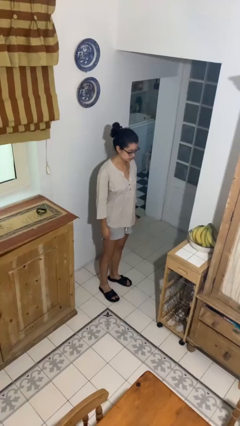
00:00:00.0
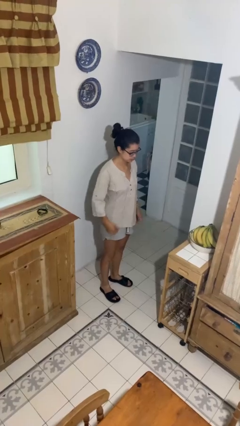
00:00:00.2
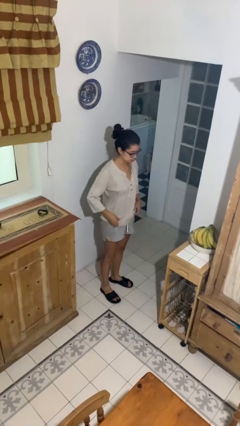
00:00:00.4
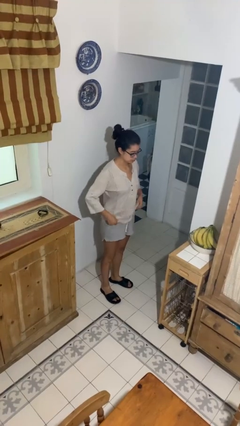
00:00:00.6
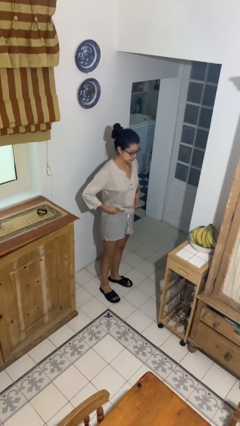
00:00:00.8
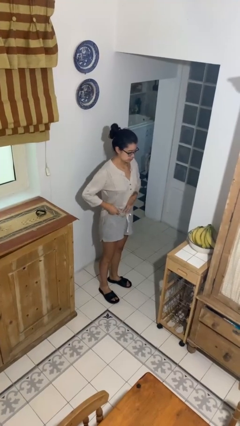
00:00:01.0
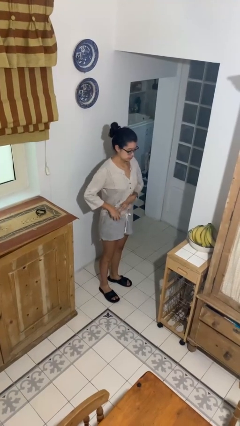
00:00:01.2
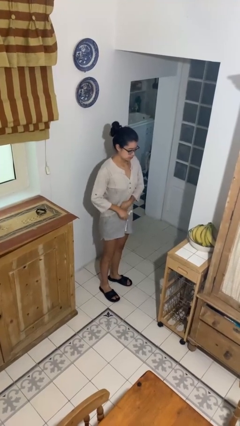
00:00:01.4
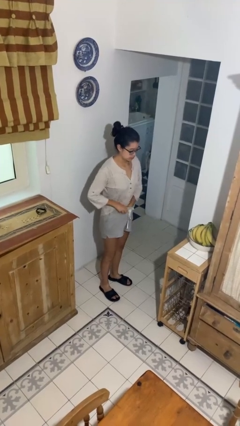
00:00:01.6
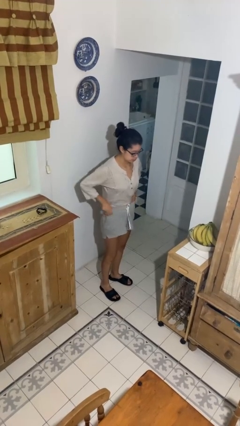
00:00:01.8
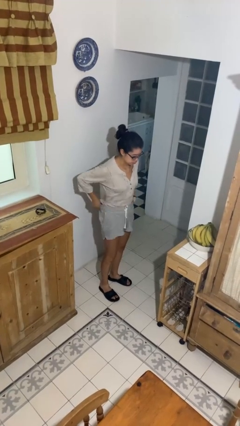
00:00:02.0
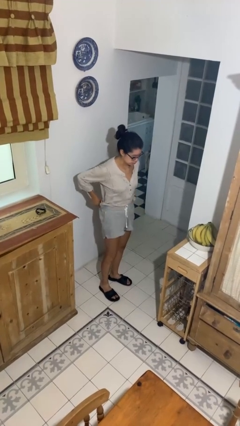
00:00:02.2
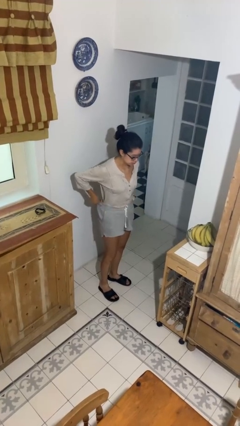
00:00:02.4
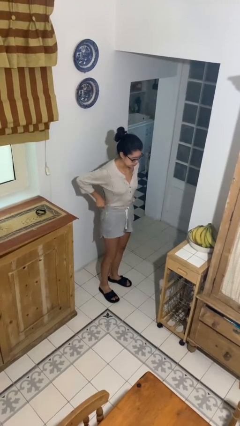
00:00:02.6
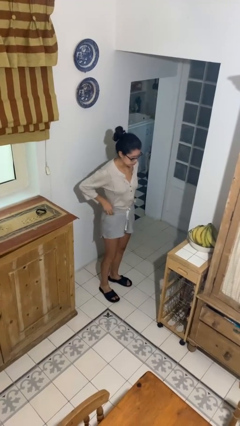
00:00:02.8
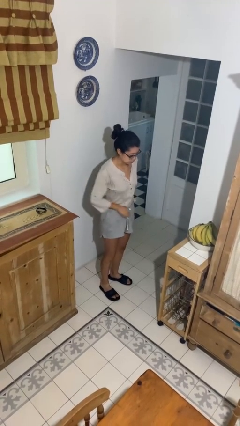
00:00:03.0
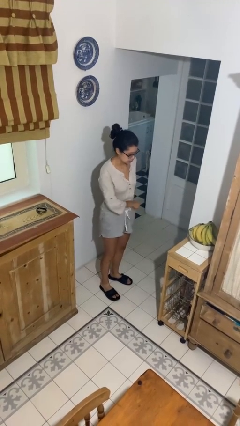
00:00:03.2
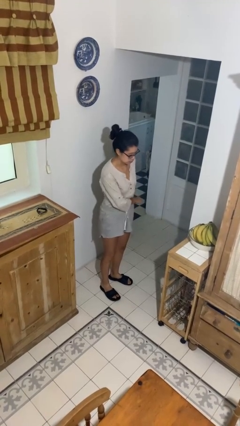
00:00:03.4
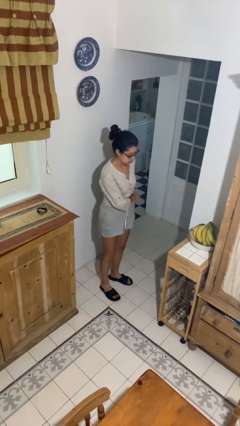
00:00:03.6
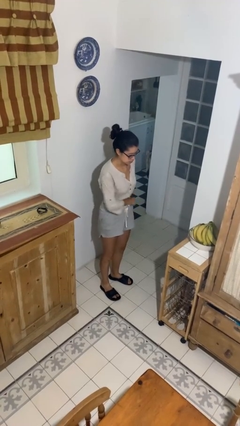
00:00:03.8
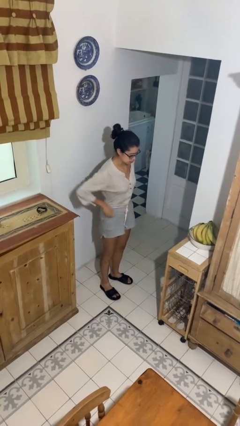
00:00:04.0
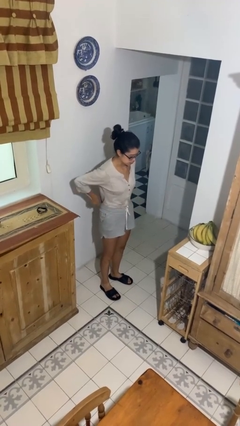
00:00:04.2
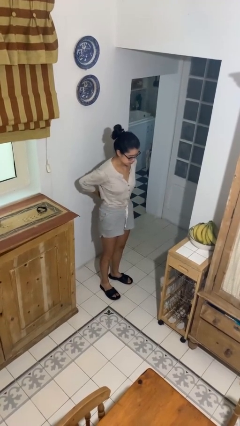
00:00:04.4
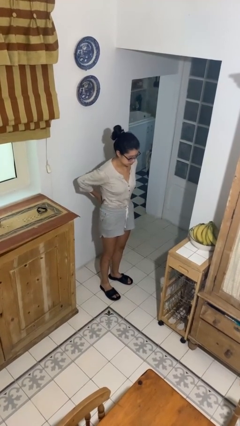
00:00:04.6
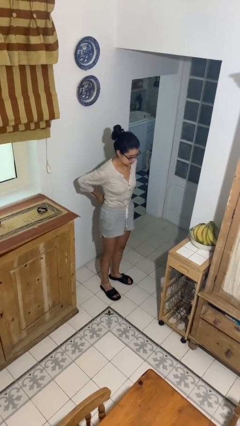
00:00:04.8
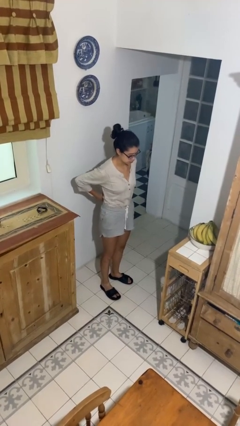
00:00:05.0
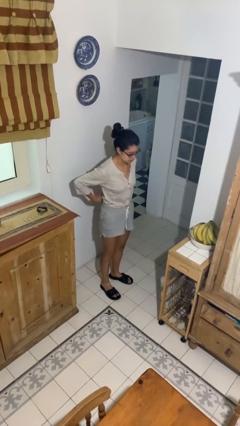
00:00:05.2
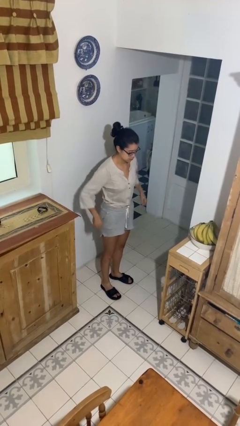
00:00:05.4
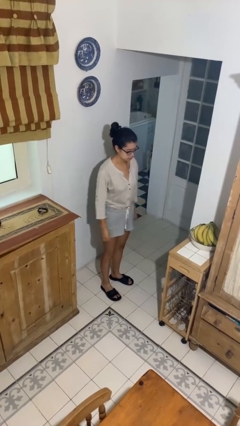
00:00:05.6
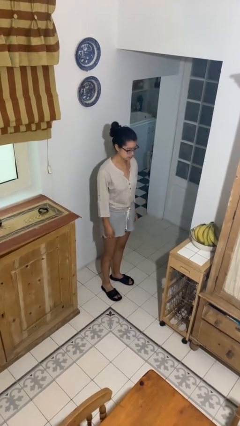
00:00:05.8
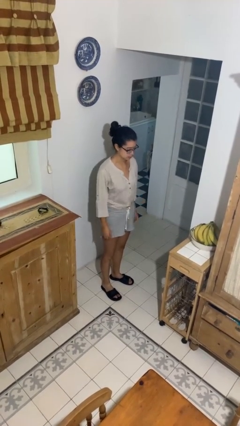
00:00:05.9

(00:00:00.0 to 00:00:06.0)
person tucks in shirt

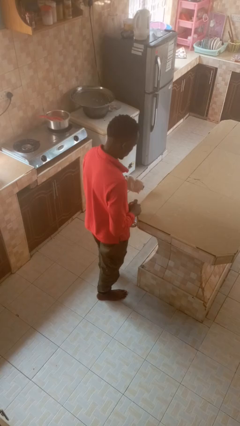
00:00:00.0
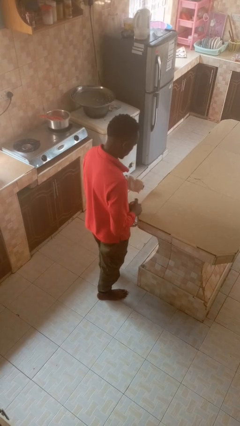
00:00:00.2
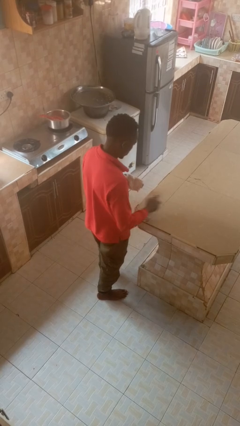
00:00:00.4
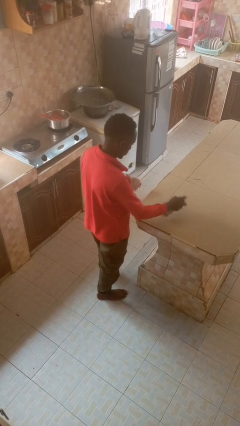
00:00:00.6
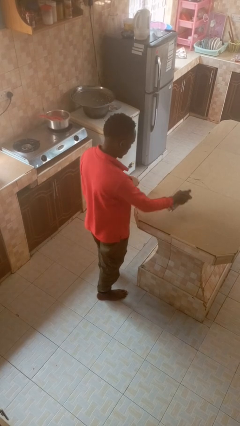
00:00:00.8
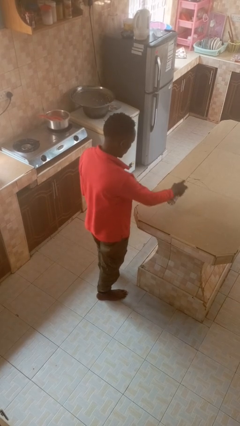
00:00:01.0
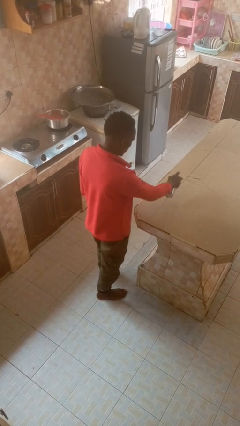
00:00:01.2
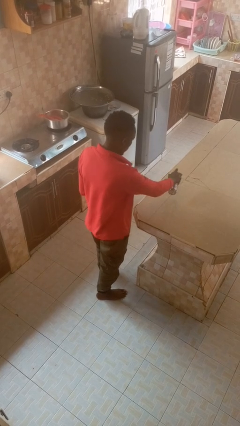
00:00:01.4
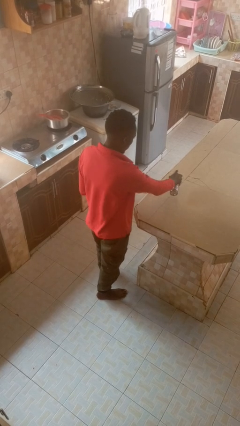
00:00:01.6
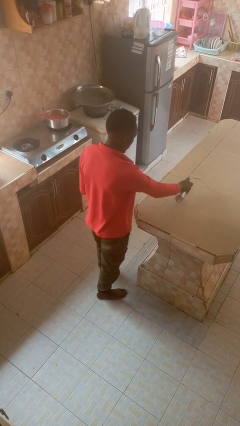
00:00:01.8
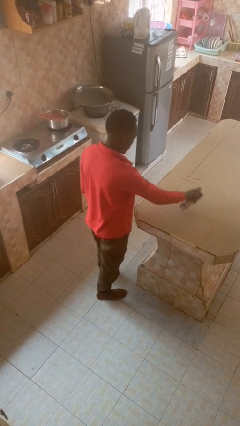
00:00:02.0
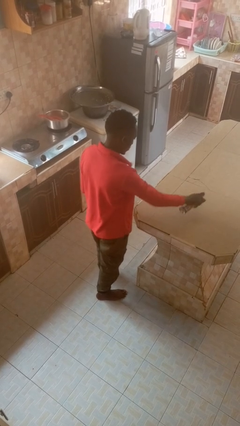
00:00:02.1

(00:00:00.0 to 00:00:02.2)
person sprays from bottle

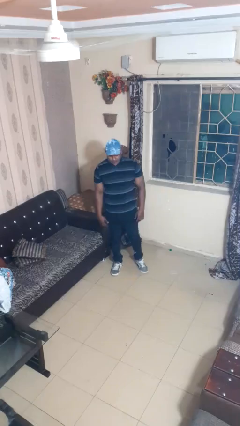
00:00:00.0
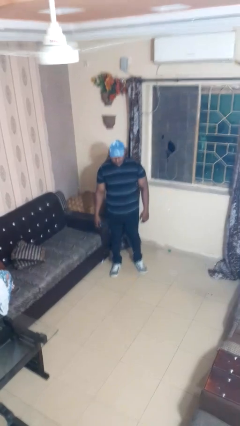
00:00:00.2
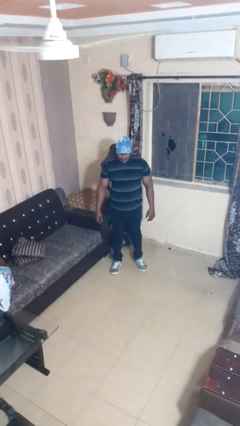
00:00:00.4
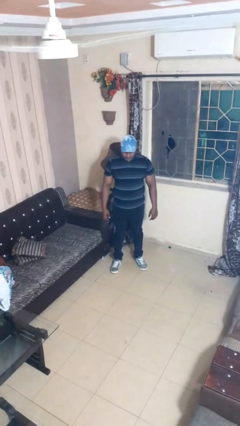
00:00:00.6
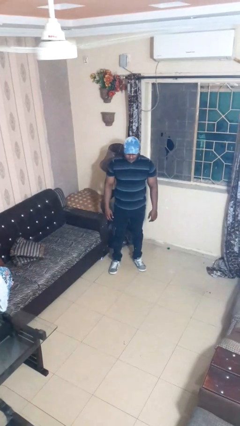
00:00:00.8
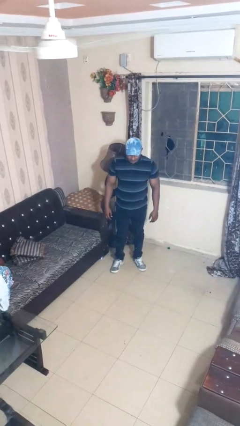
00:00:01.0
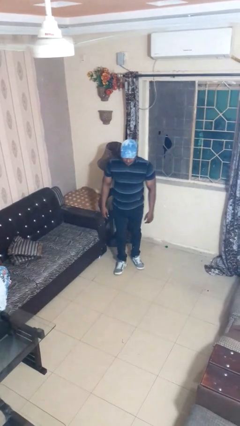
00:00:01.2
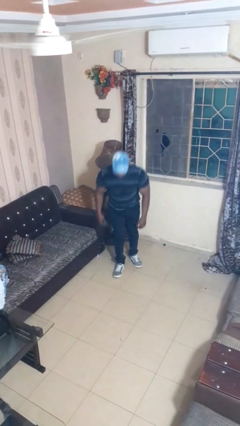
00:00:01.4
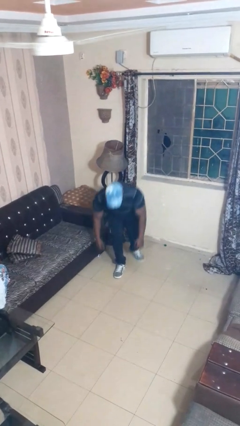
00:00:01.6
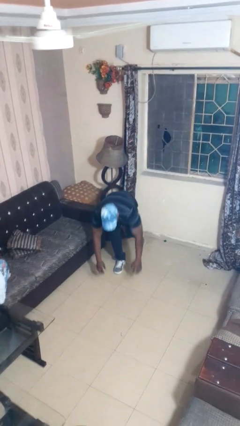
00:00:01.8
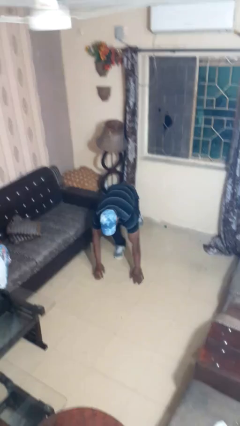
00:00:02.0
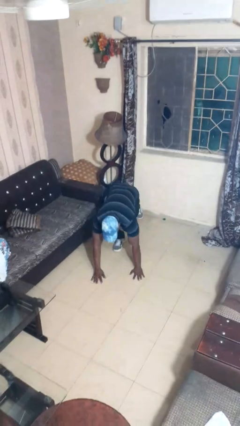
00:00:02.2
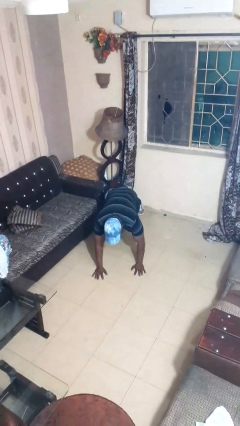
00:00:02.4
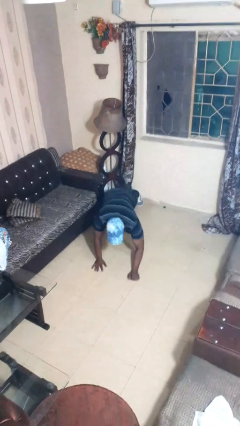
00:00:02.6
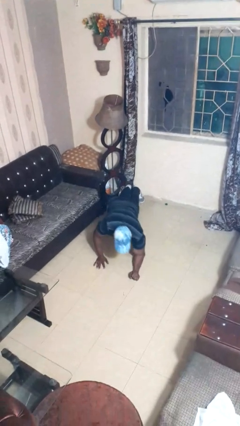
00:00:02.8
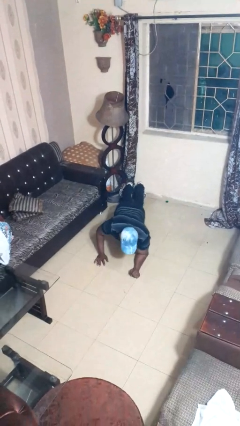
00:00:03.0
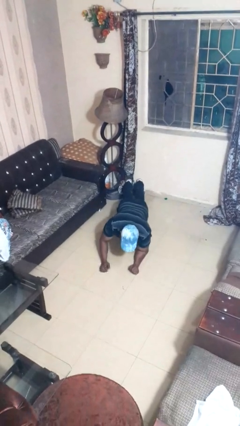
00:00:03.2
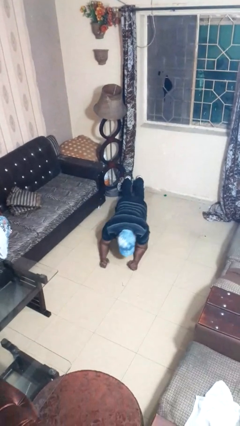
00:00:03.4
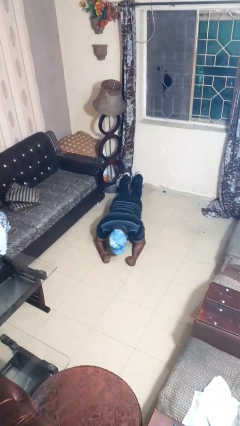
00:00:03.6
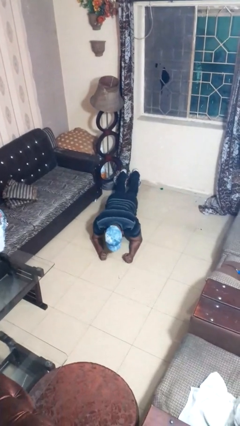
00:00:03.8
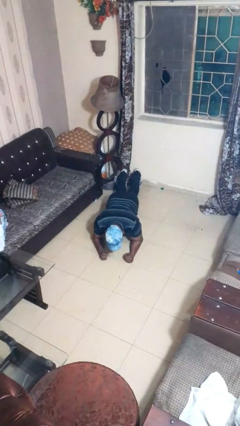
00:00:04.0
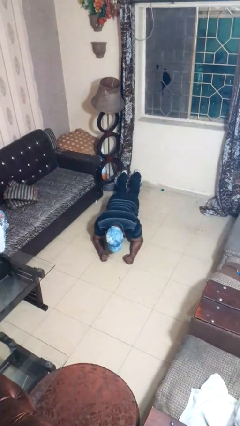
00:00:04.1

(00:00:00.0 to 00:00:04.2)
person exercises with plank

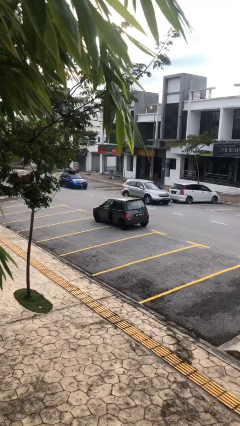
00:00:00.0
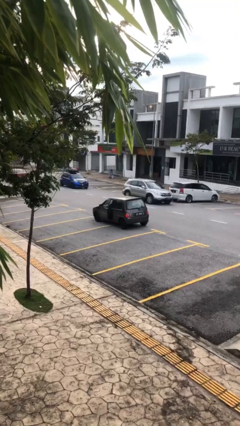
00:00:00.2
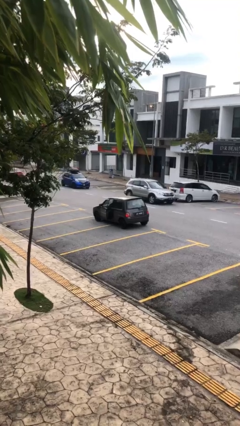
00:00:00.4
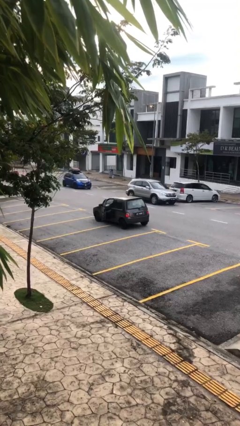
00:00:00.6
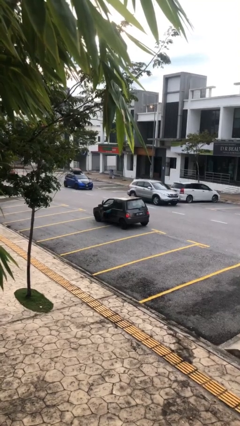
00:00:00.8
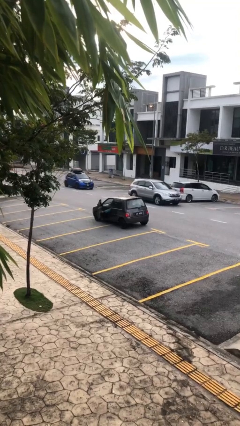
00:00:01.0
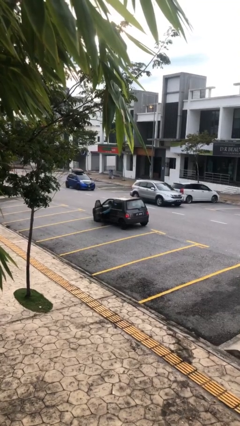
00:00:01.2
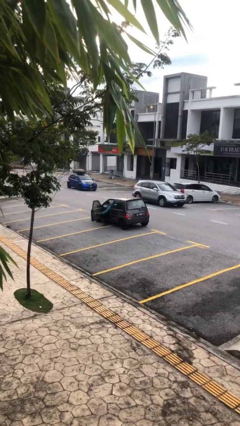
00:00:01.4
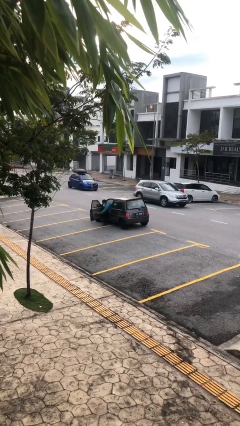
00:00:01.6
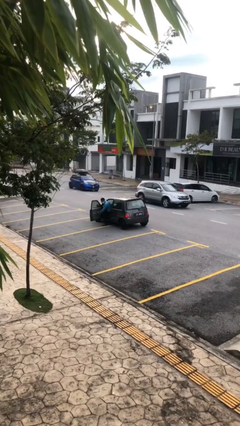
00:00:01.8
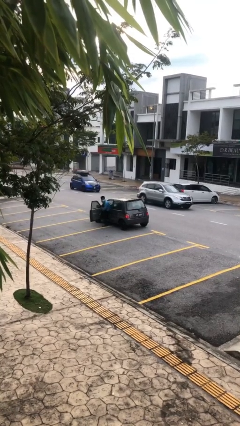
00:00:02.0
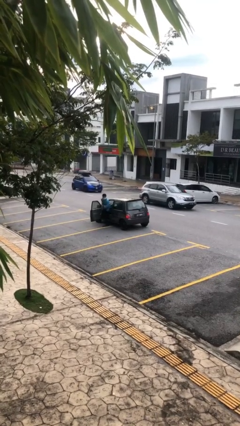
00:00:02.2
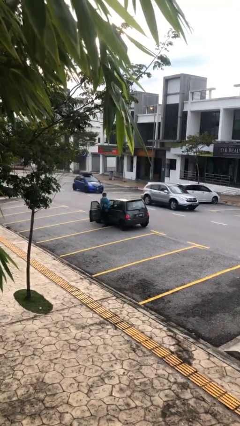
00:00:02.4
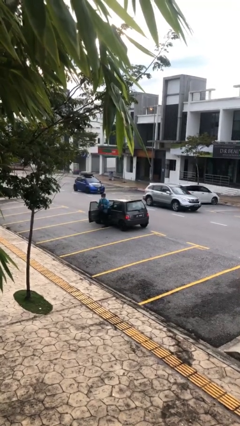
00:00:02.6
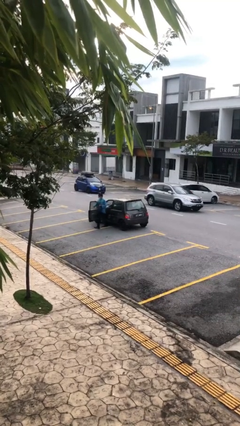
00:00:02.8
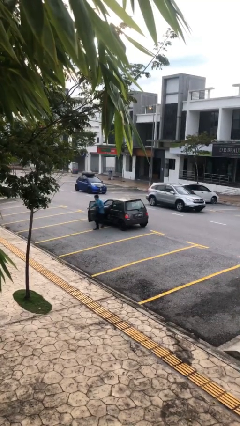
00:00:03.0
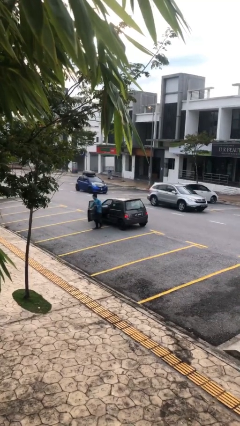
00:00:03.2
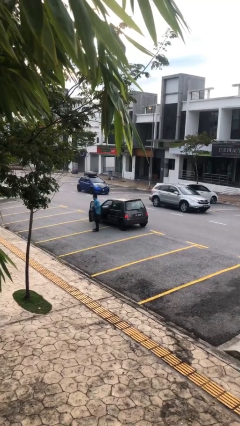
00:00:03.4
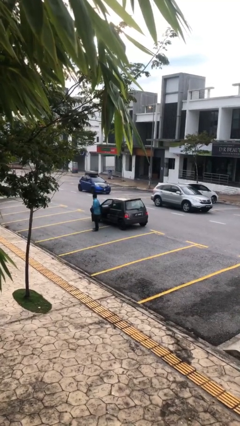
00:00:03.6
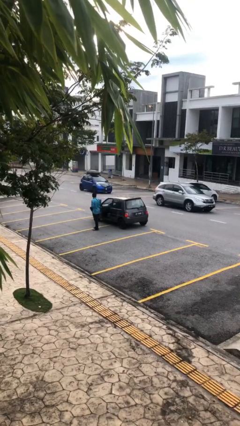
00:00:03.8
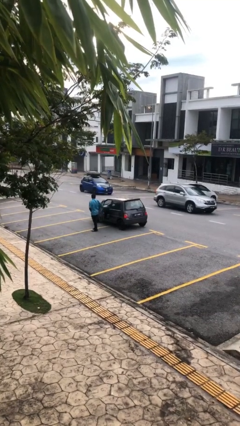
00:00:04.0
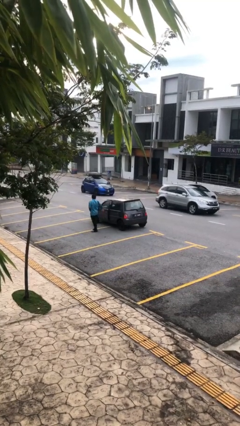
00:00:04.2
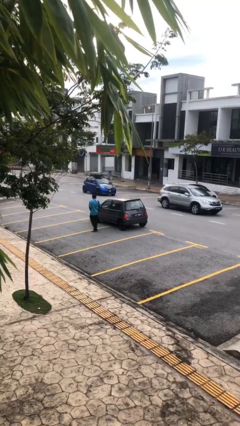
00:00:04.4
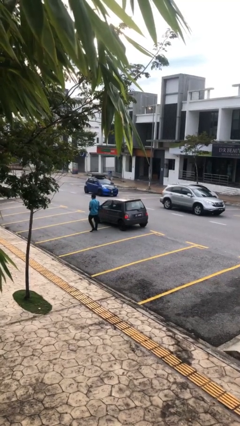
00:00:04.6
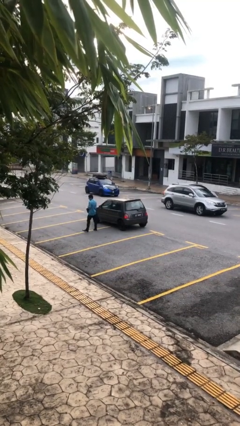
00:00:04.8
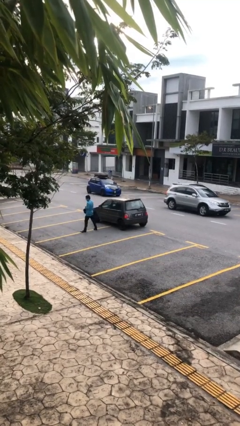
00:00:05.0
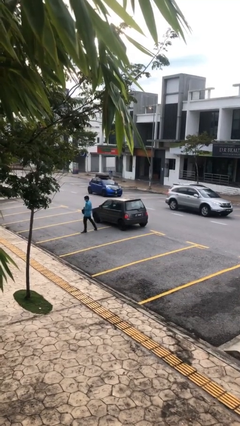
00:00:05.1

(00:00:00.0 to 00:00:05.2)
car drops off person

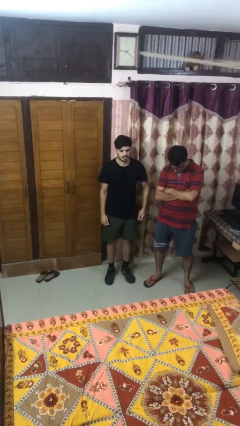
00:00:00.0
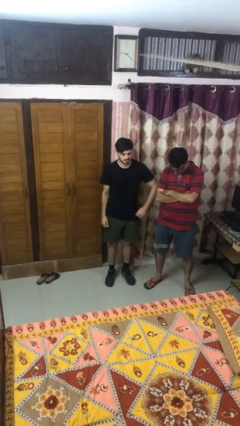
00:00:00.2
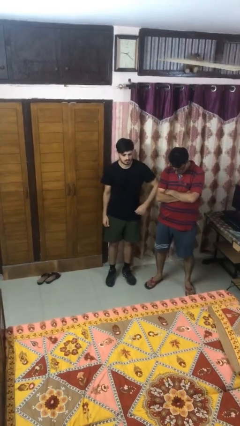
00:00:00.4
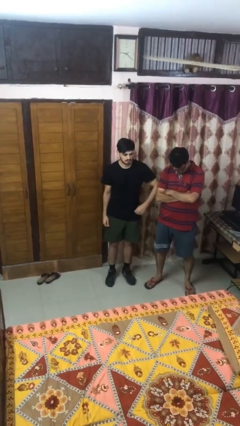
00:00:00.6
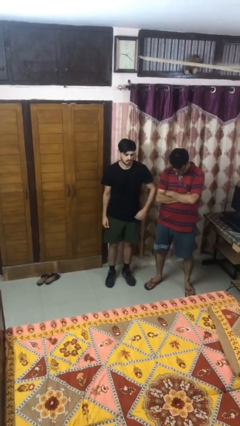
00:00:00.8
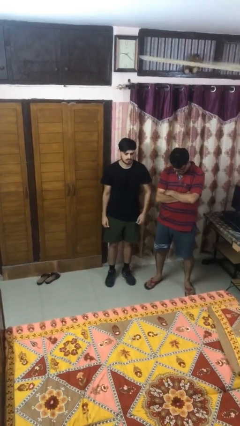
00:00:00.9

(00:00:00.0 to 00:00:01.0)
person nudges person with elbow
